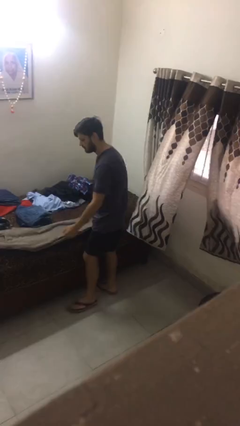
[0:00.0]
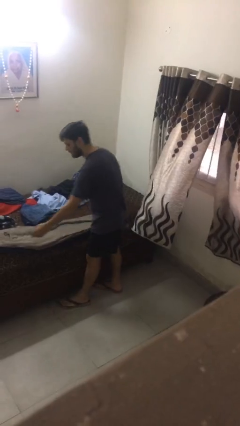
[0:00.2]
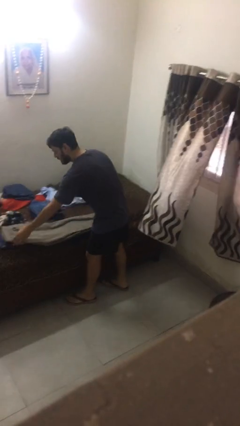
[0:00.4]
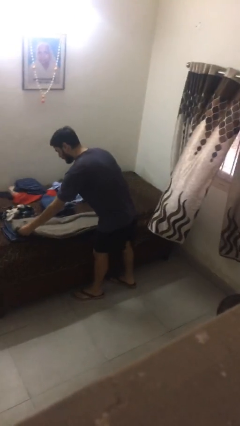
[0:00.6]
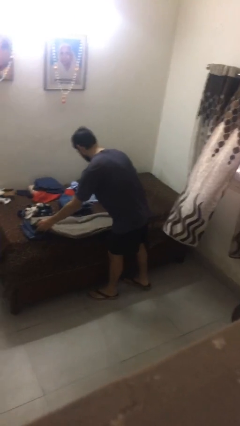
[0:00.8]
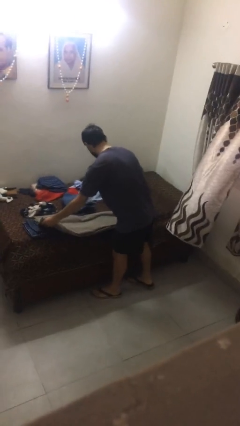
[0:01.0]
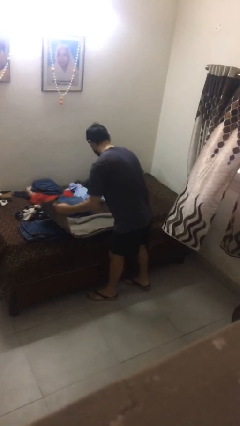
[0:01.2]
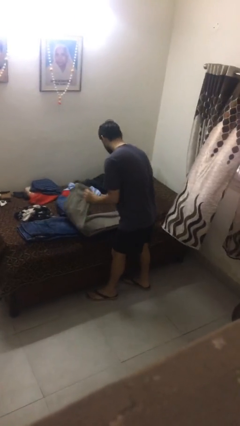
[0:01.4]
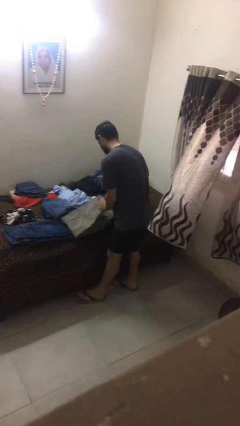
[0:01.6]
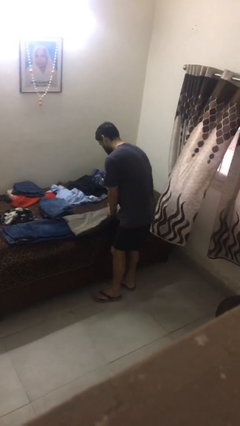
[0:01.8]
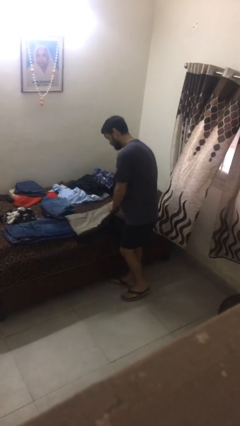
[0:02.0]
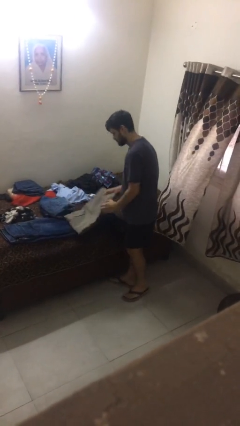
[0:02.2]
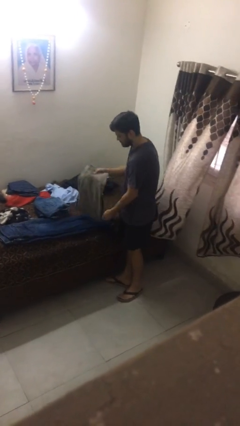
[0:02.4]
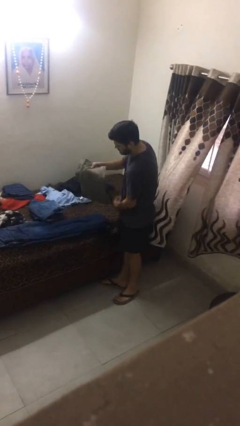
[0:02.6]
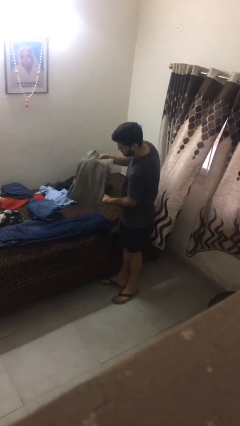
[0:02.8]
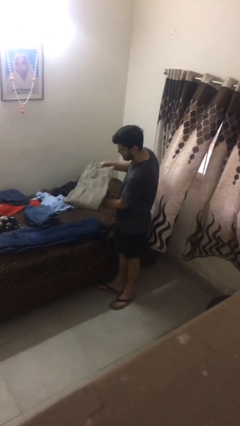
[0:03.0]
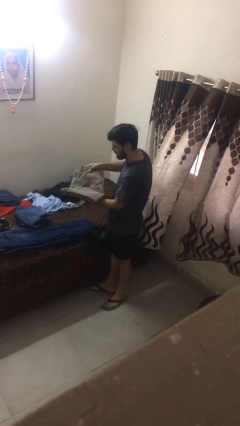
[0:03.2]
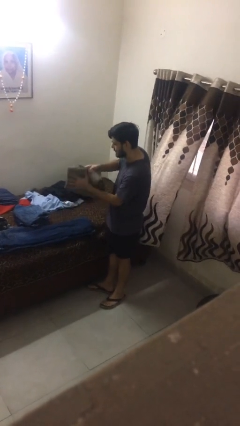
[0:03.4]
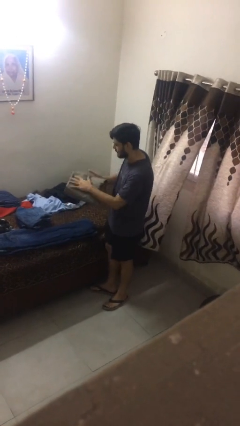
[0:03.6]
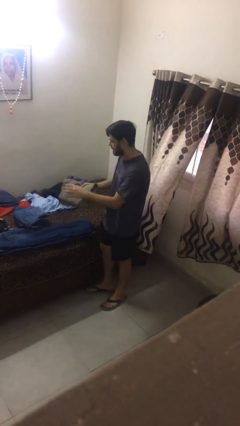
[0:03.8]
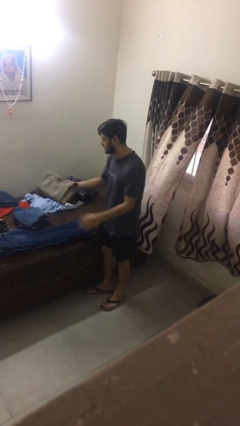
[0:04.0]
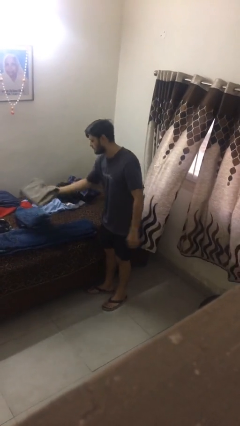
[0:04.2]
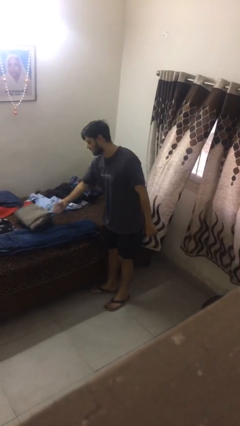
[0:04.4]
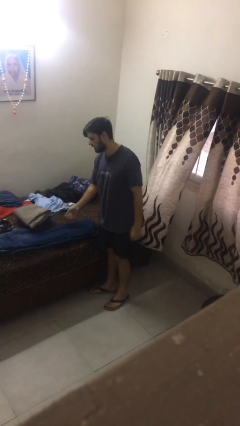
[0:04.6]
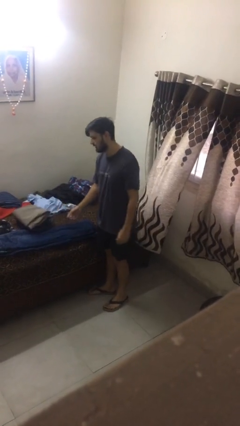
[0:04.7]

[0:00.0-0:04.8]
person folds pants

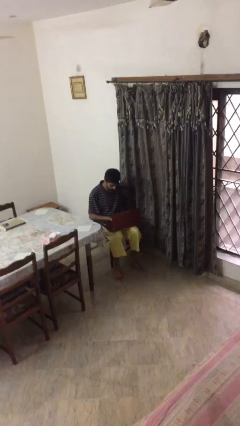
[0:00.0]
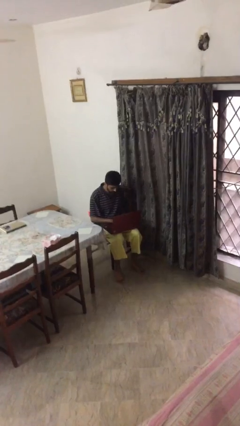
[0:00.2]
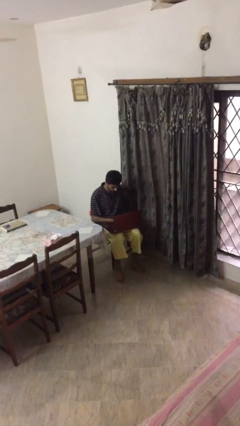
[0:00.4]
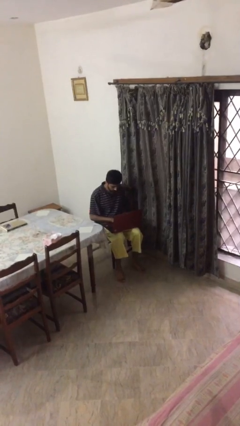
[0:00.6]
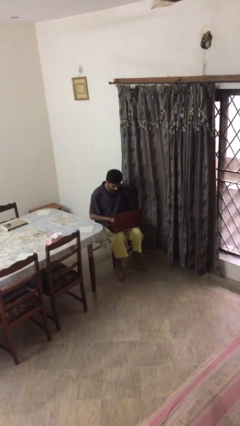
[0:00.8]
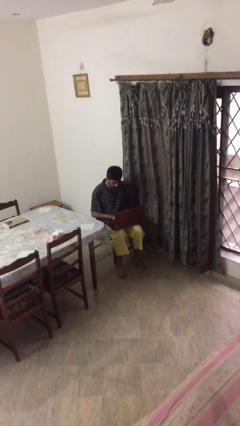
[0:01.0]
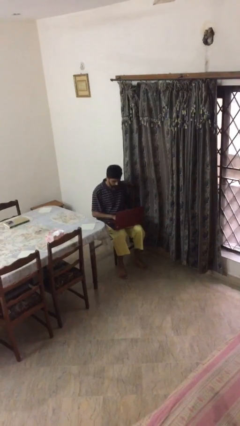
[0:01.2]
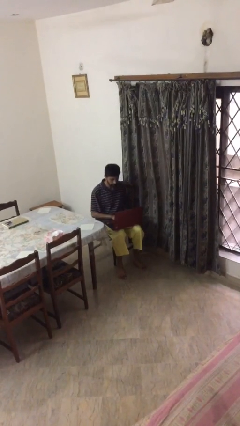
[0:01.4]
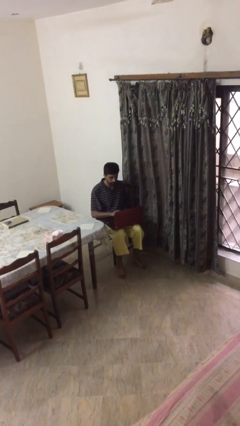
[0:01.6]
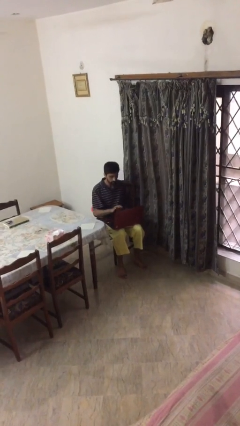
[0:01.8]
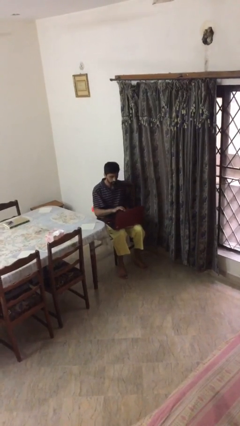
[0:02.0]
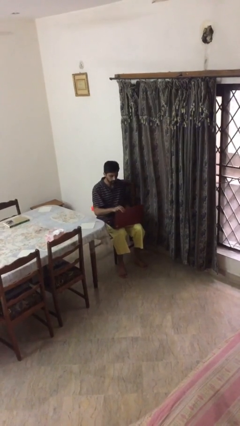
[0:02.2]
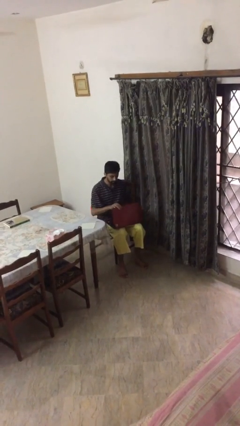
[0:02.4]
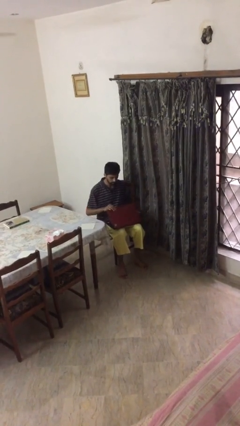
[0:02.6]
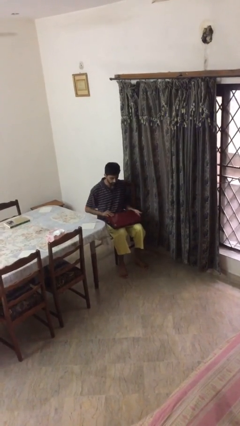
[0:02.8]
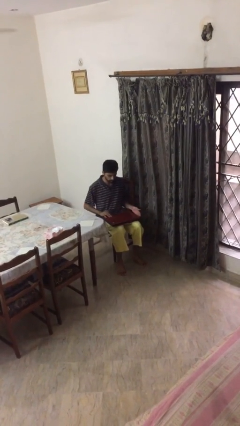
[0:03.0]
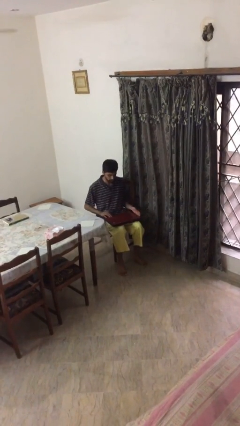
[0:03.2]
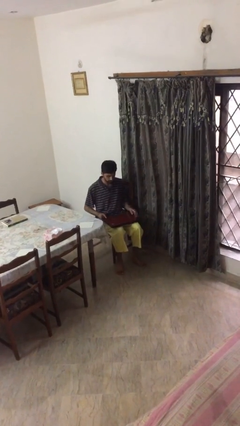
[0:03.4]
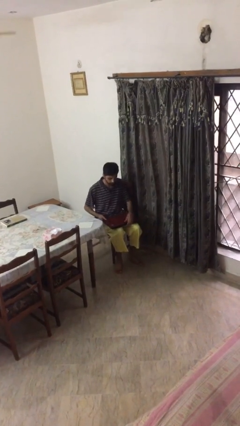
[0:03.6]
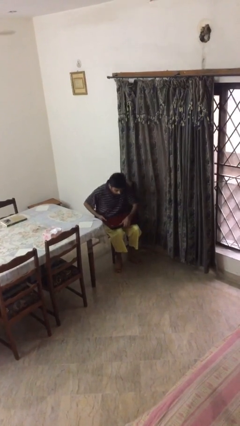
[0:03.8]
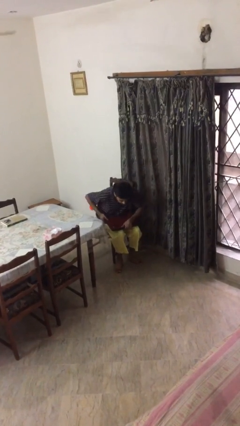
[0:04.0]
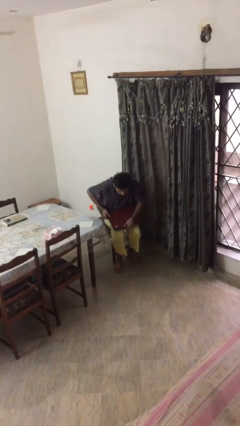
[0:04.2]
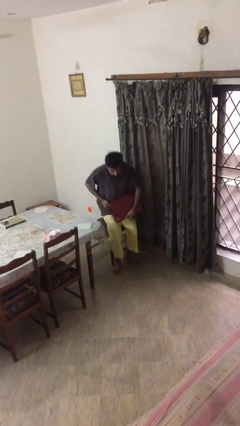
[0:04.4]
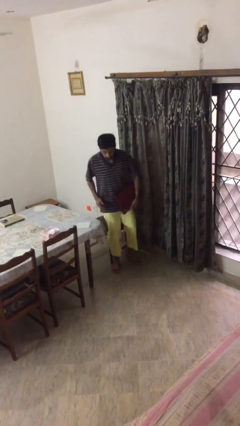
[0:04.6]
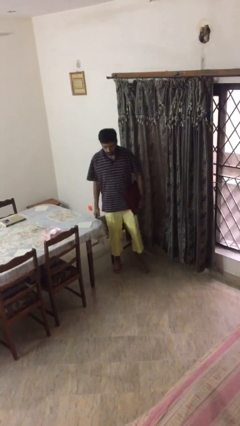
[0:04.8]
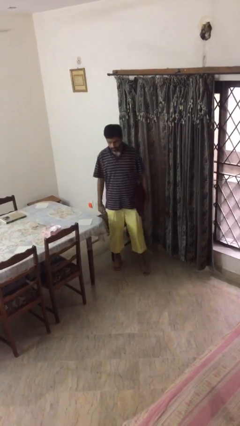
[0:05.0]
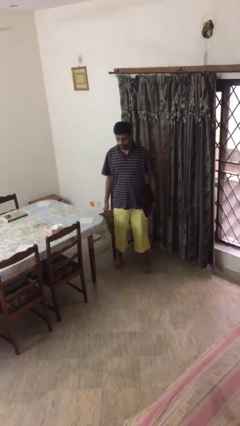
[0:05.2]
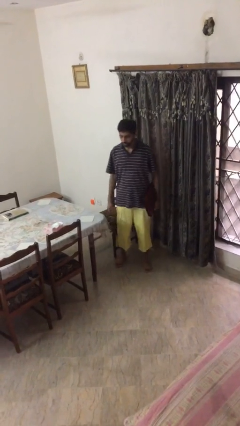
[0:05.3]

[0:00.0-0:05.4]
person stands up

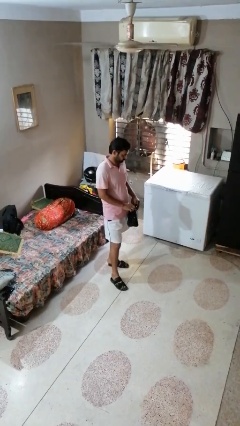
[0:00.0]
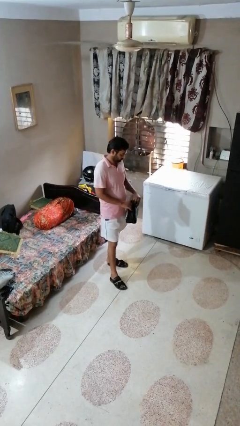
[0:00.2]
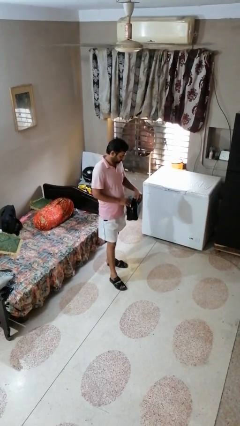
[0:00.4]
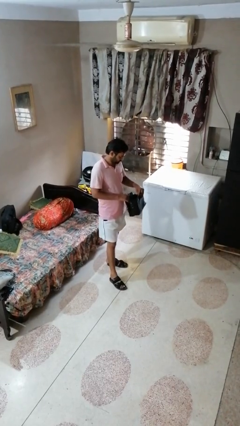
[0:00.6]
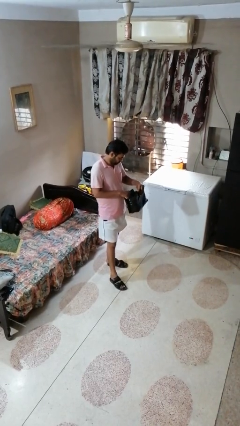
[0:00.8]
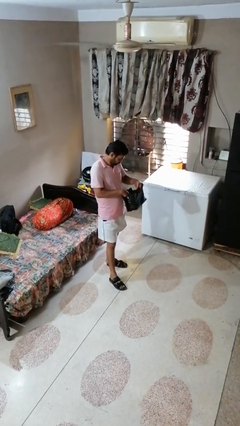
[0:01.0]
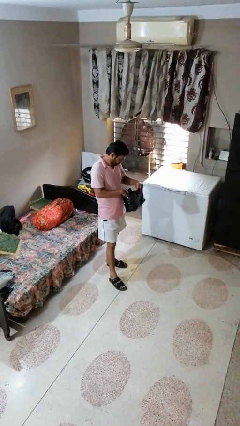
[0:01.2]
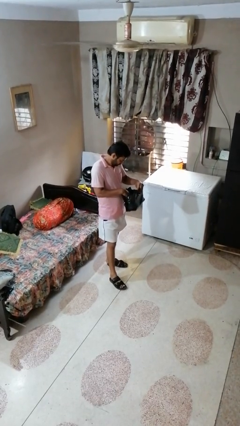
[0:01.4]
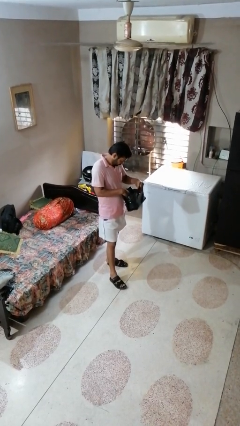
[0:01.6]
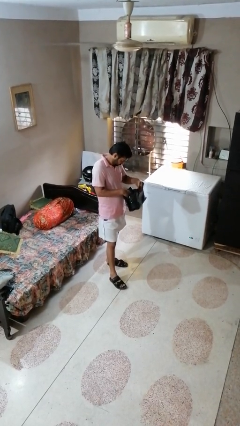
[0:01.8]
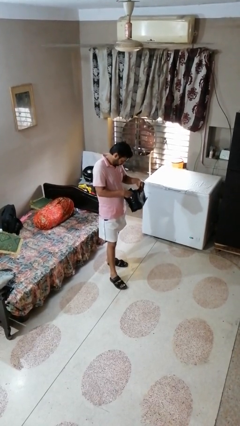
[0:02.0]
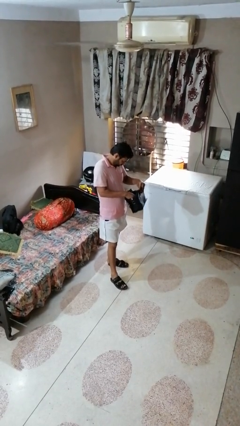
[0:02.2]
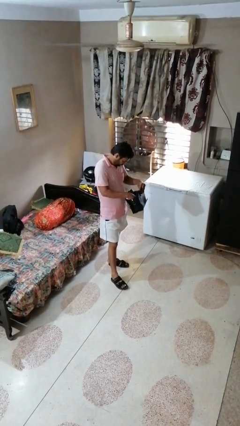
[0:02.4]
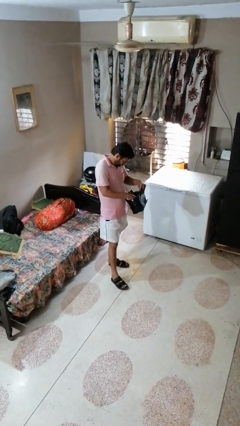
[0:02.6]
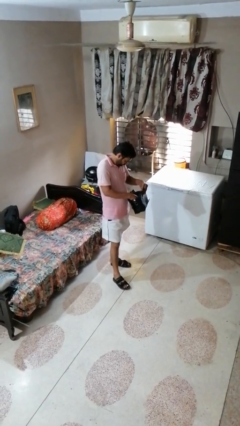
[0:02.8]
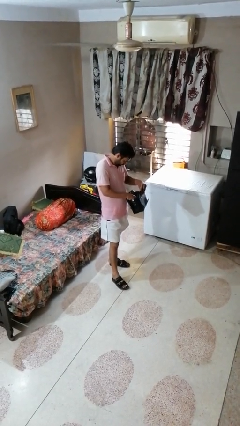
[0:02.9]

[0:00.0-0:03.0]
person searches in purse

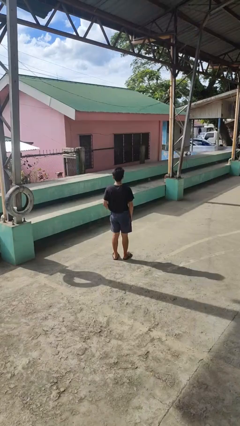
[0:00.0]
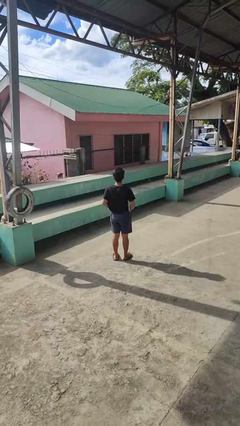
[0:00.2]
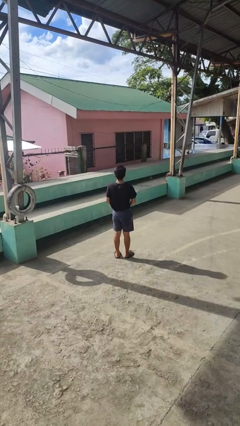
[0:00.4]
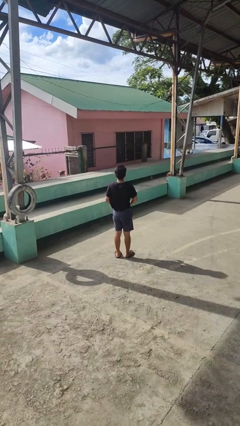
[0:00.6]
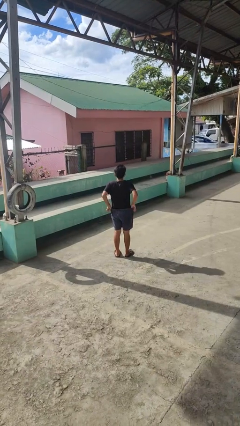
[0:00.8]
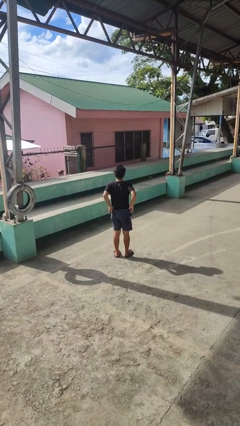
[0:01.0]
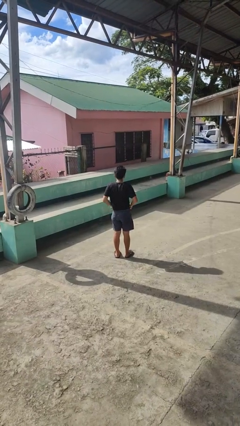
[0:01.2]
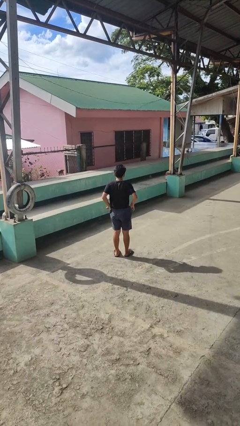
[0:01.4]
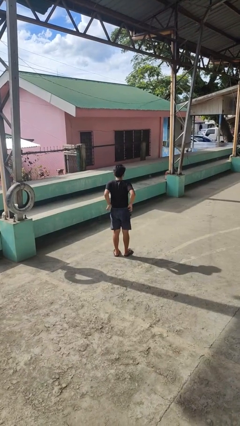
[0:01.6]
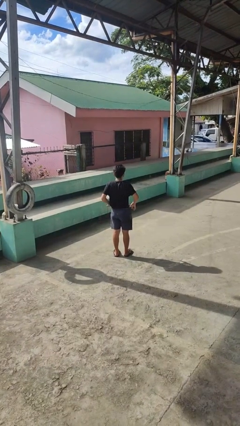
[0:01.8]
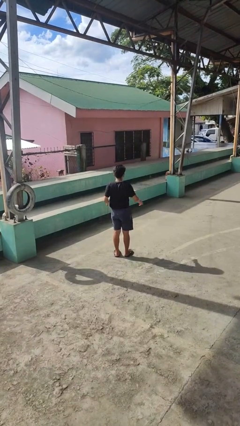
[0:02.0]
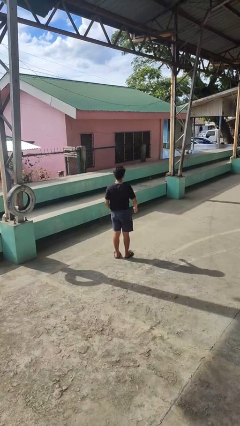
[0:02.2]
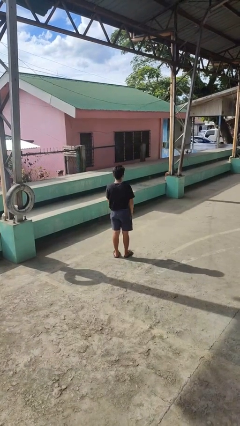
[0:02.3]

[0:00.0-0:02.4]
person hikes up pants

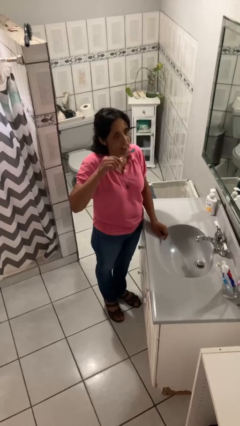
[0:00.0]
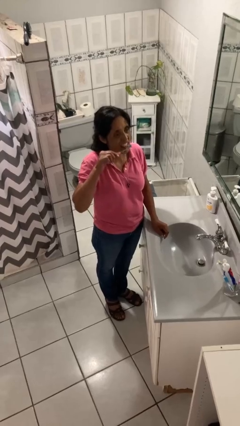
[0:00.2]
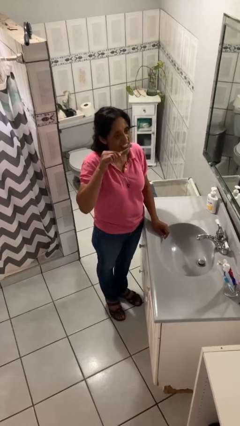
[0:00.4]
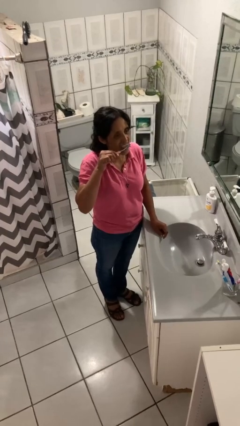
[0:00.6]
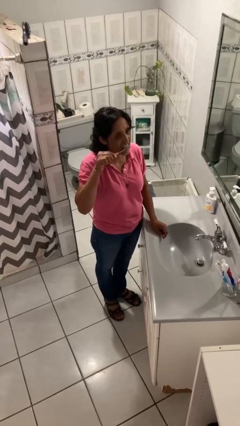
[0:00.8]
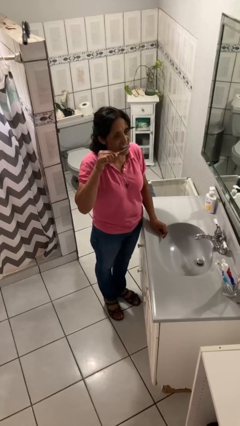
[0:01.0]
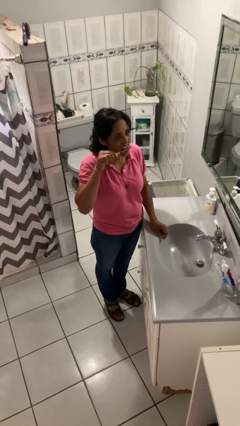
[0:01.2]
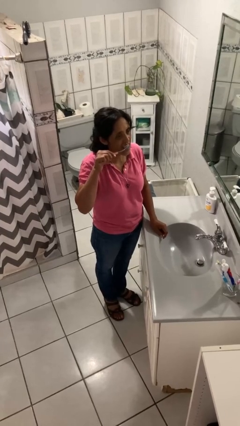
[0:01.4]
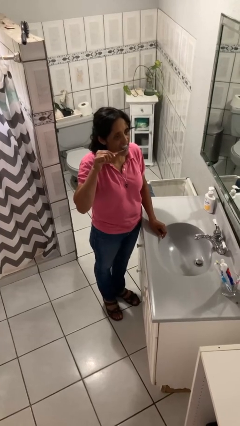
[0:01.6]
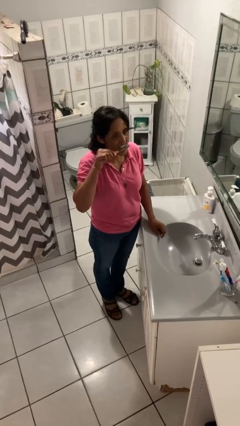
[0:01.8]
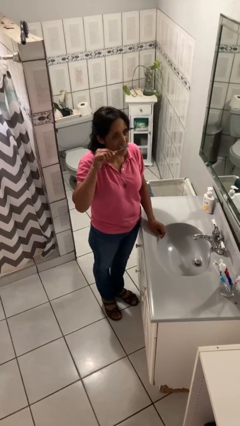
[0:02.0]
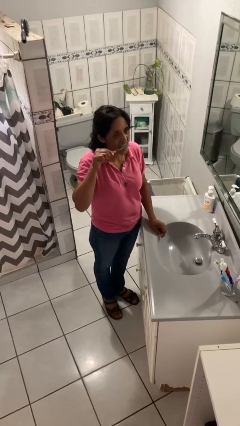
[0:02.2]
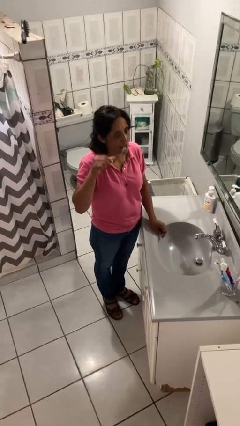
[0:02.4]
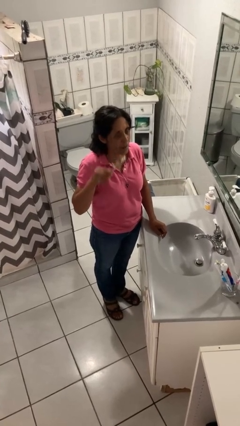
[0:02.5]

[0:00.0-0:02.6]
person brushes teeth
